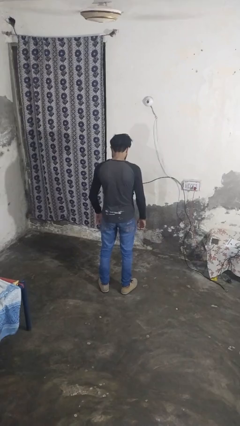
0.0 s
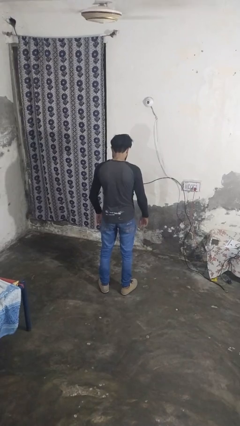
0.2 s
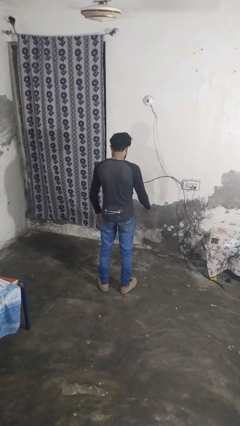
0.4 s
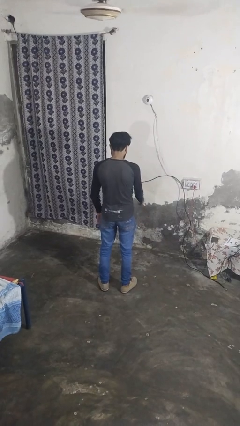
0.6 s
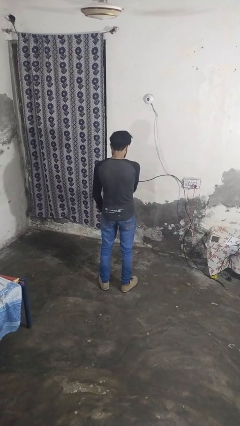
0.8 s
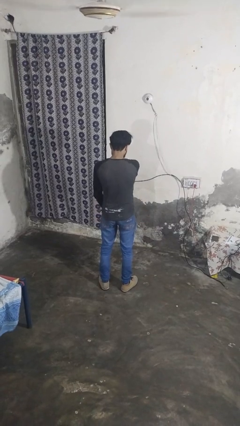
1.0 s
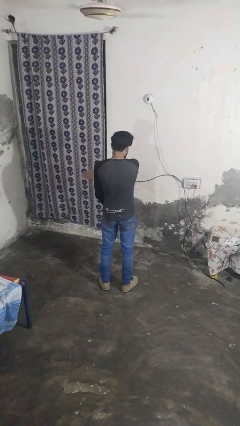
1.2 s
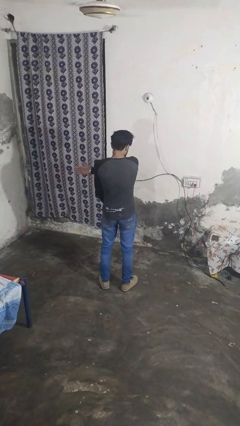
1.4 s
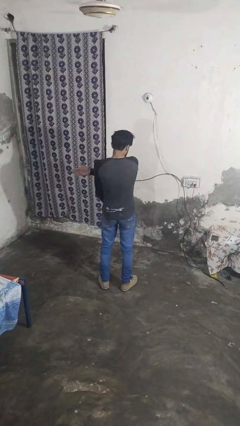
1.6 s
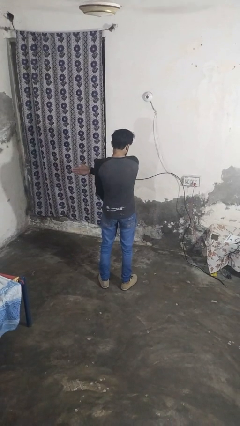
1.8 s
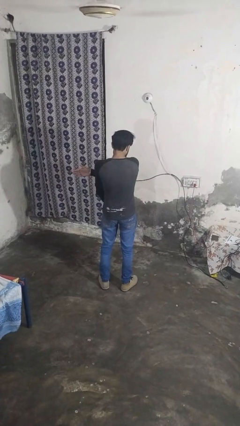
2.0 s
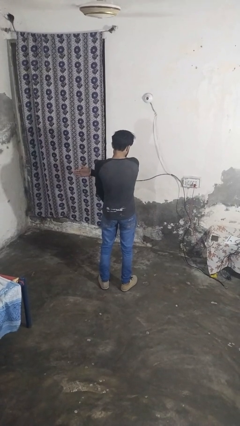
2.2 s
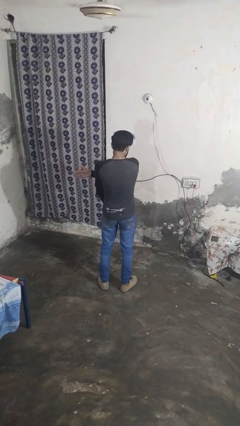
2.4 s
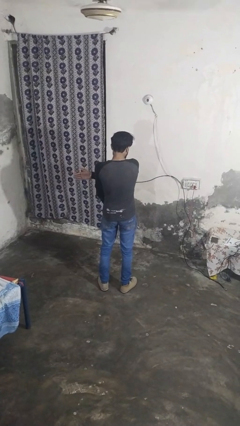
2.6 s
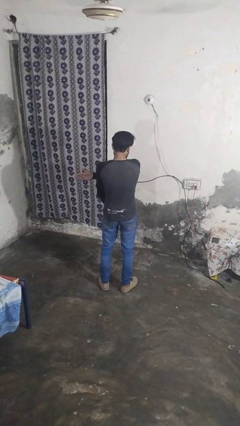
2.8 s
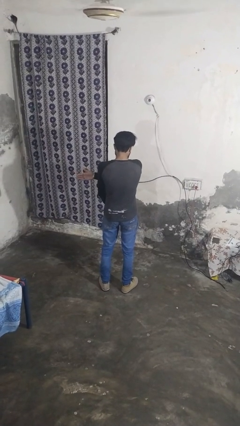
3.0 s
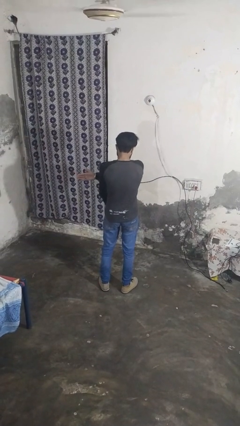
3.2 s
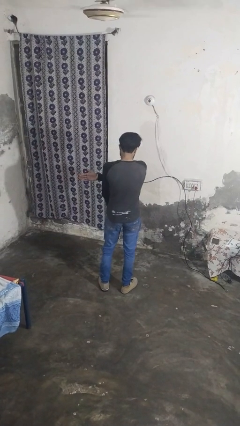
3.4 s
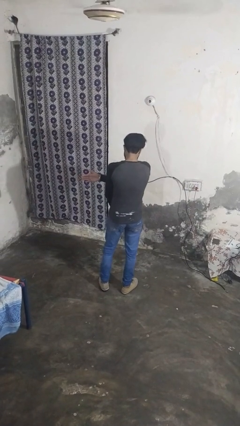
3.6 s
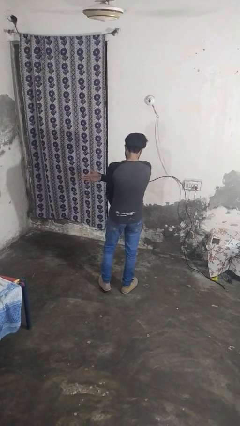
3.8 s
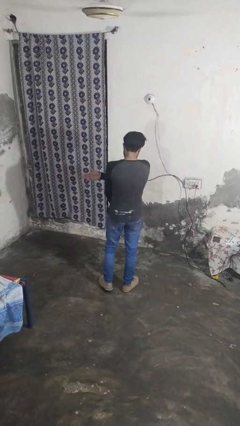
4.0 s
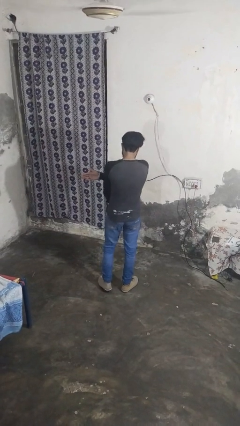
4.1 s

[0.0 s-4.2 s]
person gestures swipe left

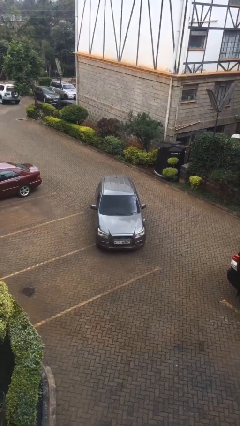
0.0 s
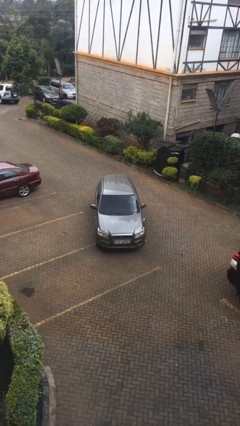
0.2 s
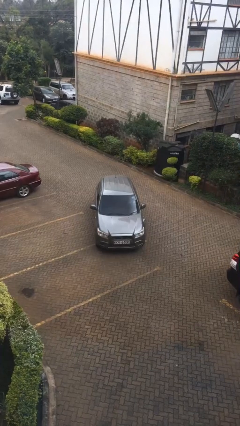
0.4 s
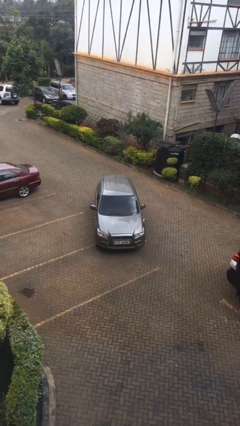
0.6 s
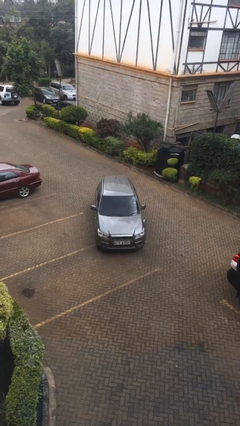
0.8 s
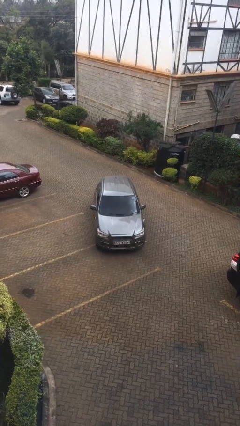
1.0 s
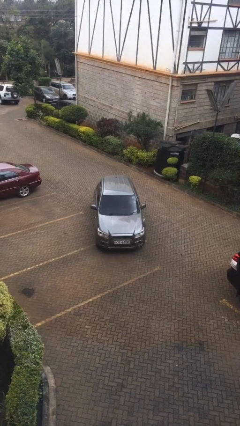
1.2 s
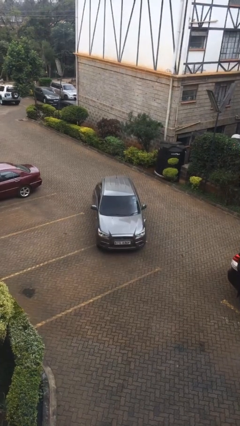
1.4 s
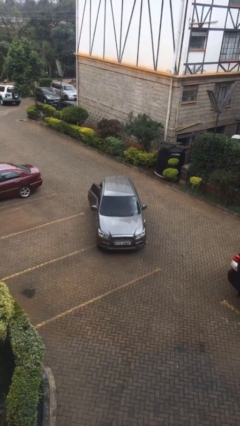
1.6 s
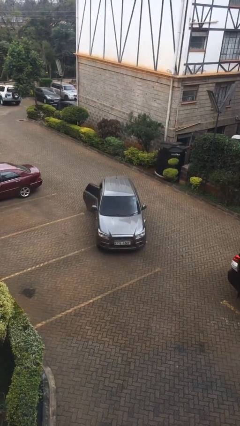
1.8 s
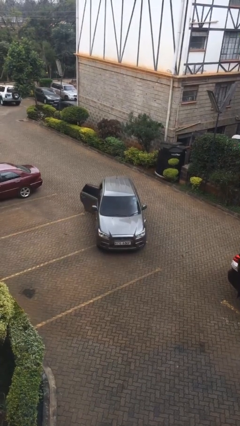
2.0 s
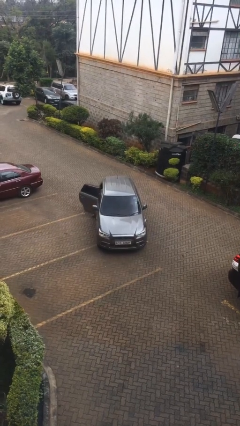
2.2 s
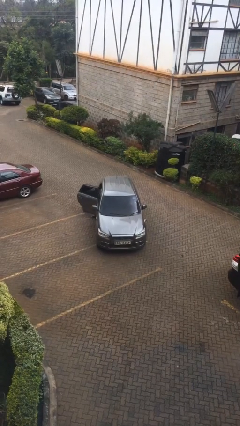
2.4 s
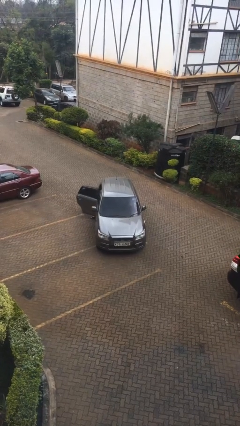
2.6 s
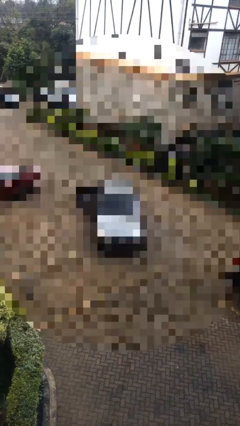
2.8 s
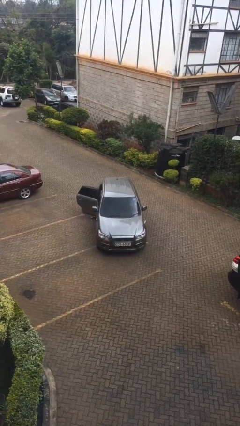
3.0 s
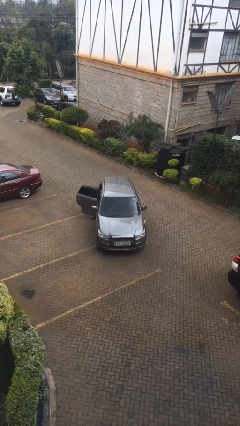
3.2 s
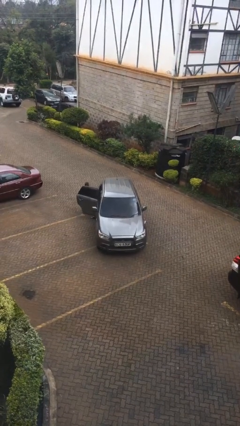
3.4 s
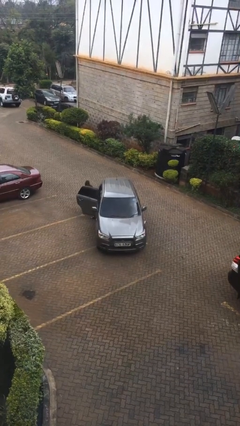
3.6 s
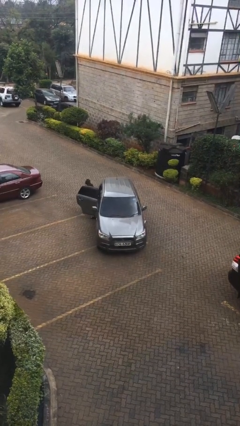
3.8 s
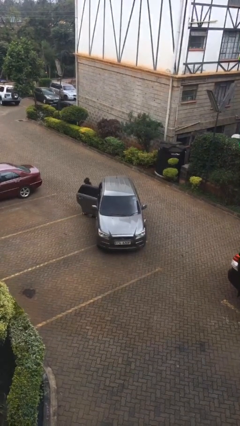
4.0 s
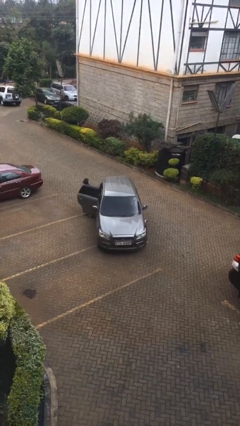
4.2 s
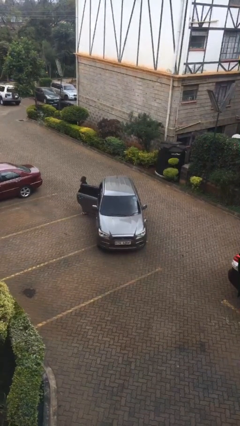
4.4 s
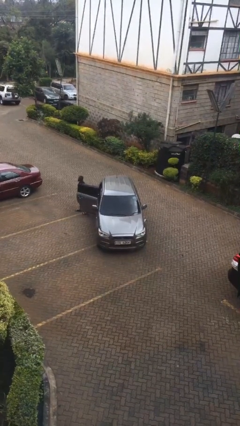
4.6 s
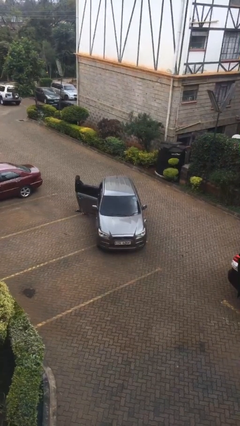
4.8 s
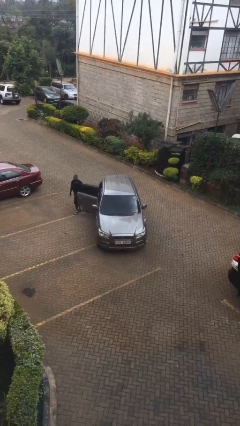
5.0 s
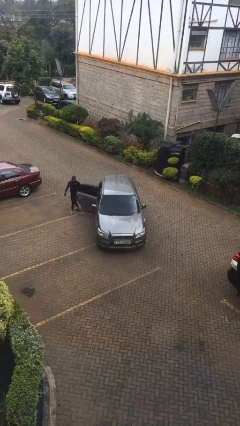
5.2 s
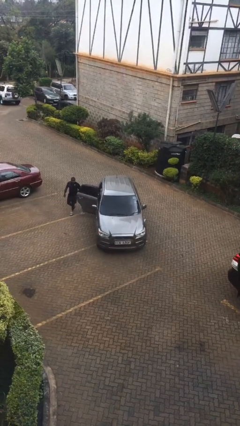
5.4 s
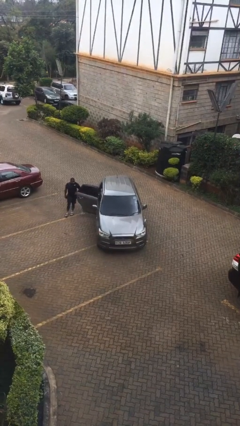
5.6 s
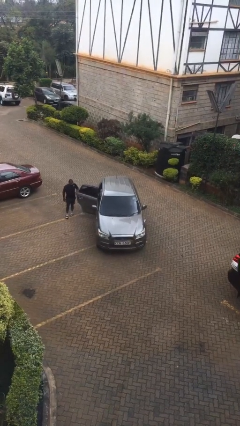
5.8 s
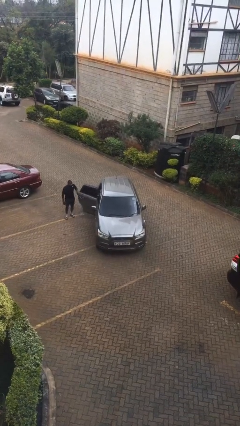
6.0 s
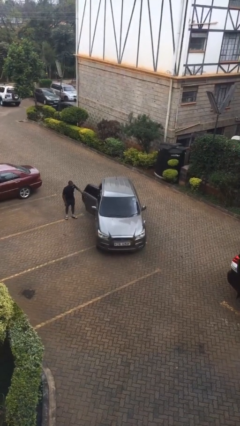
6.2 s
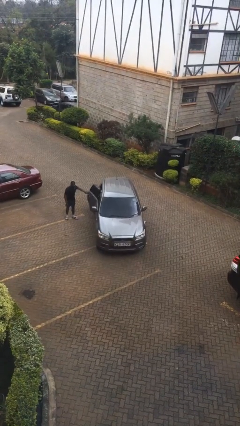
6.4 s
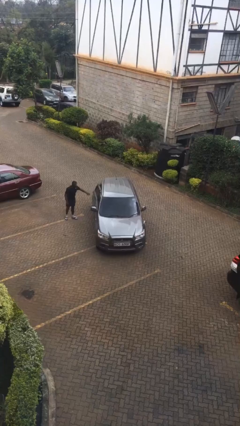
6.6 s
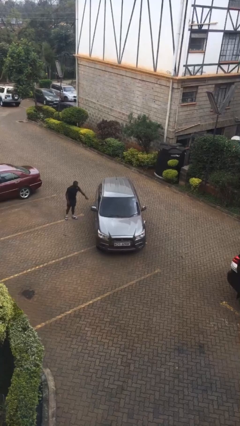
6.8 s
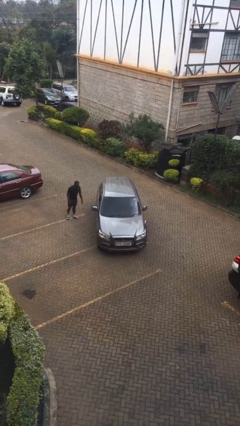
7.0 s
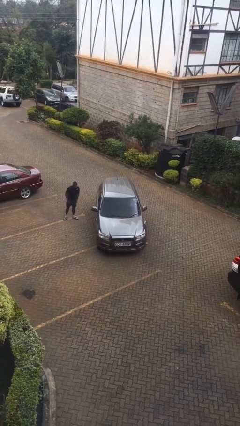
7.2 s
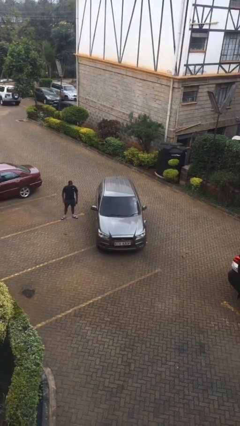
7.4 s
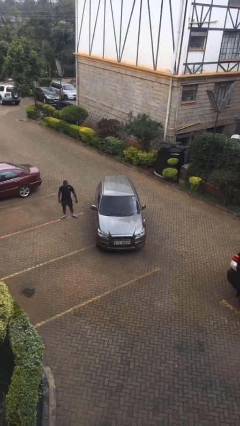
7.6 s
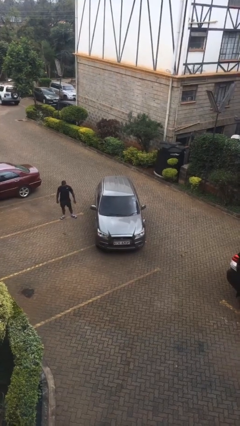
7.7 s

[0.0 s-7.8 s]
car drops off person

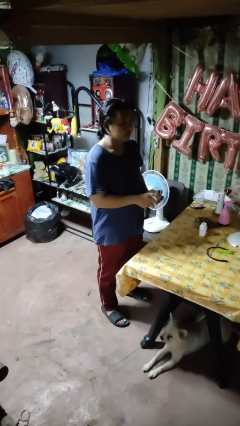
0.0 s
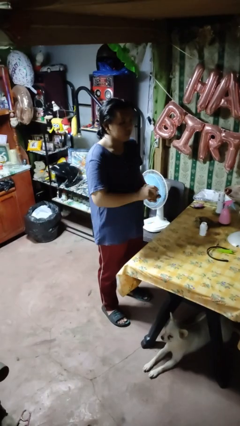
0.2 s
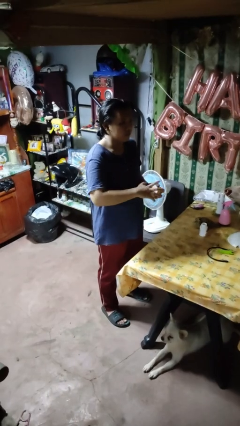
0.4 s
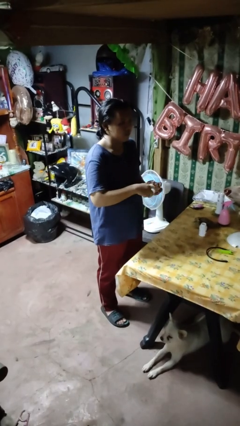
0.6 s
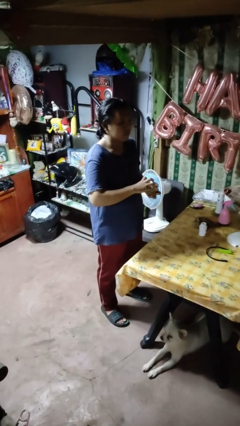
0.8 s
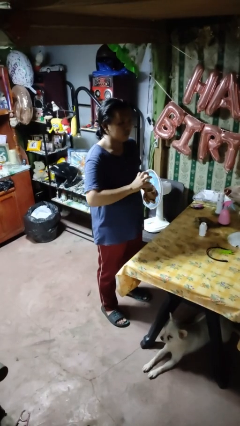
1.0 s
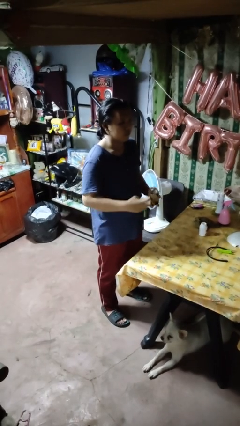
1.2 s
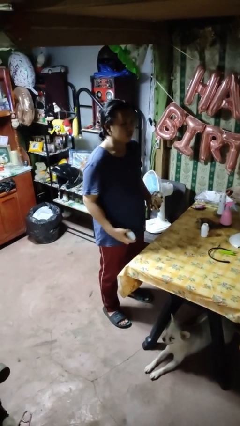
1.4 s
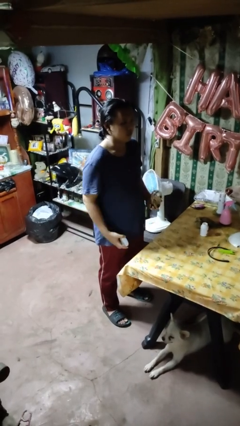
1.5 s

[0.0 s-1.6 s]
person opens jar

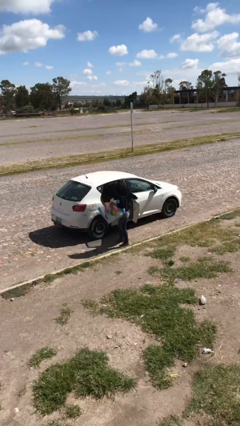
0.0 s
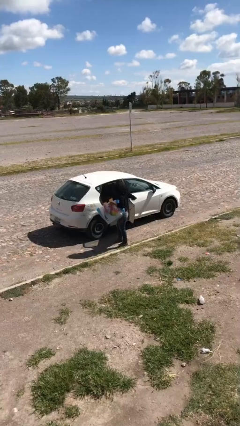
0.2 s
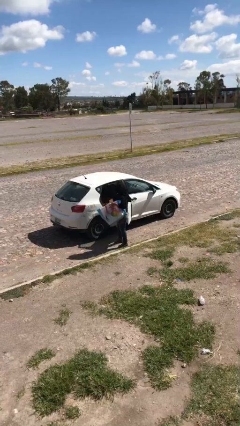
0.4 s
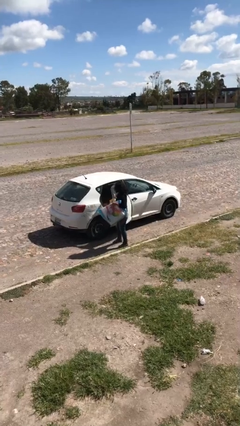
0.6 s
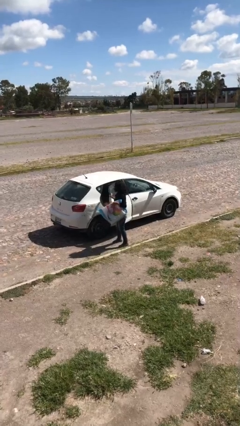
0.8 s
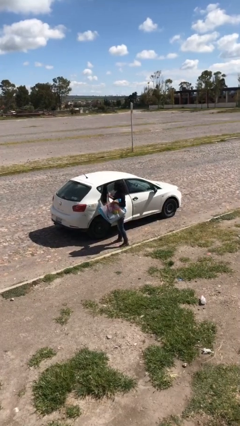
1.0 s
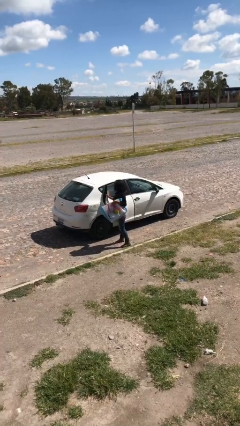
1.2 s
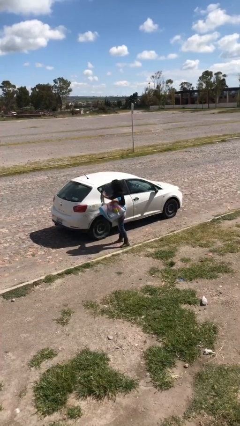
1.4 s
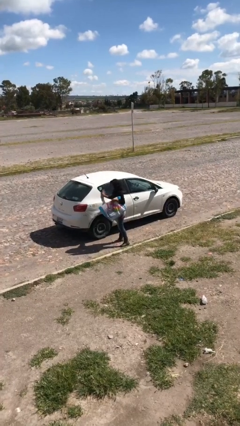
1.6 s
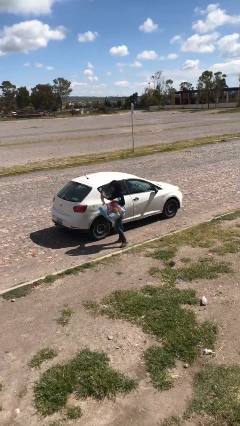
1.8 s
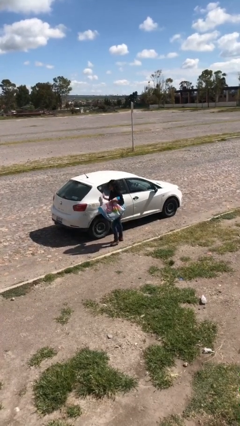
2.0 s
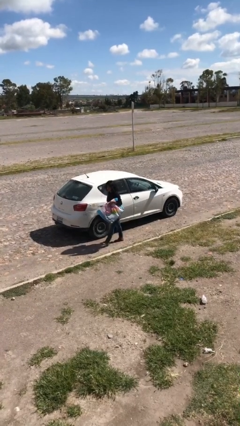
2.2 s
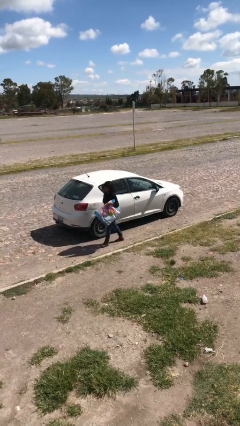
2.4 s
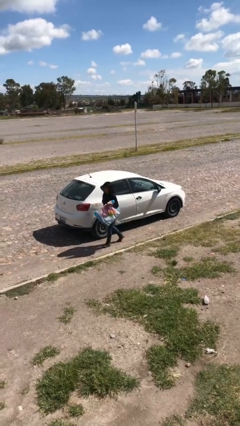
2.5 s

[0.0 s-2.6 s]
person closes car door

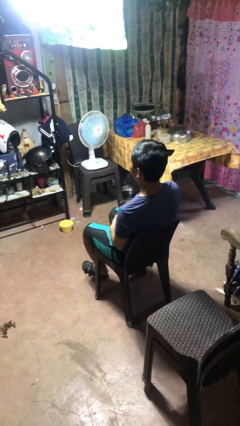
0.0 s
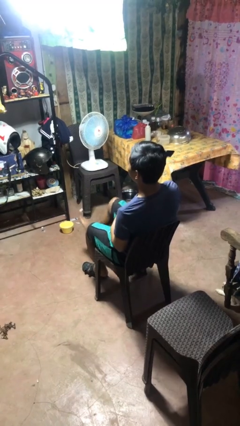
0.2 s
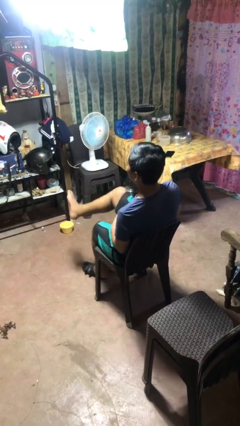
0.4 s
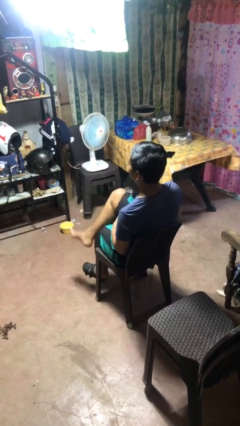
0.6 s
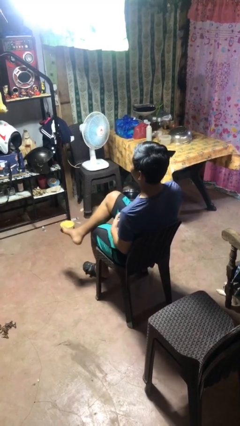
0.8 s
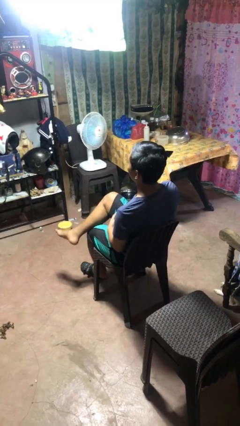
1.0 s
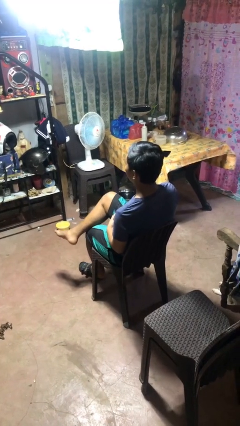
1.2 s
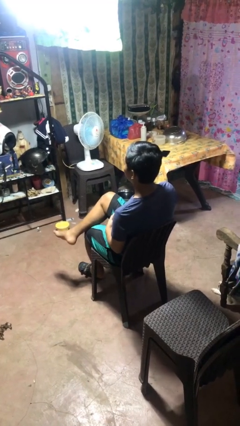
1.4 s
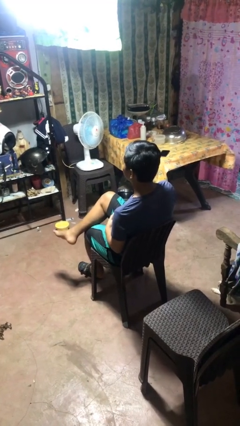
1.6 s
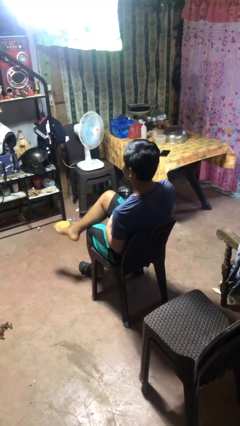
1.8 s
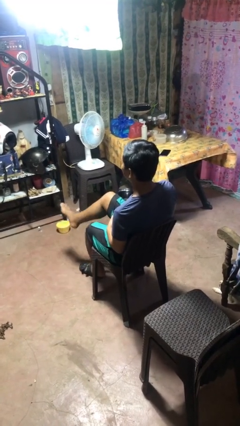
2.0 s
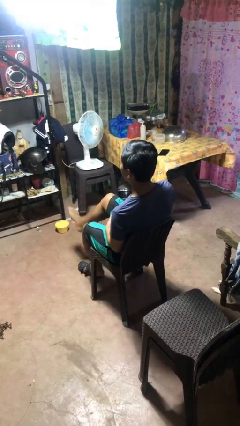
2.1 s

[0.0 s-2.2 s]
person crosses legs
